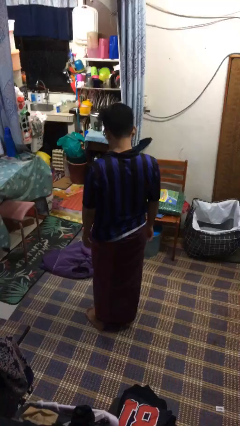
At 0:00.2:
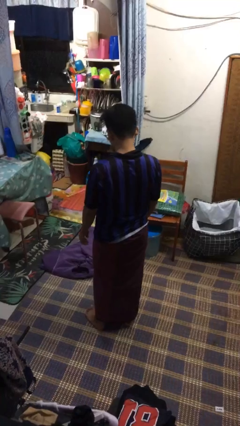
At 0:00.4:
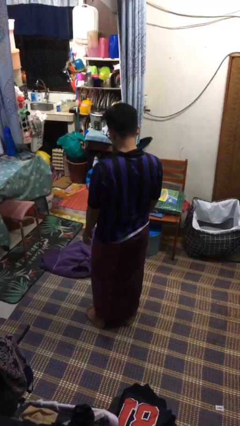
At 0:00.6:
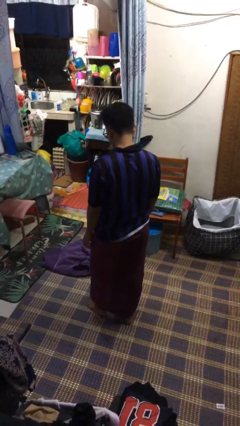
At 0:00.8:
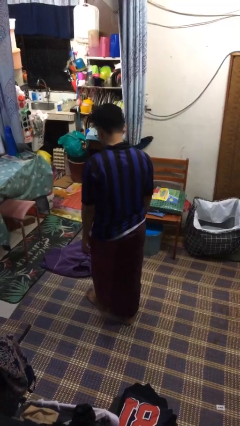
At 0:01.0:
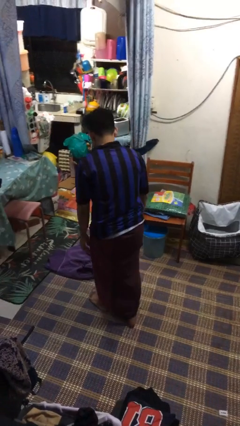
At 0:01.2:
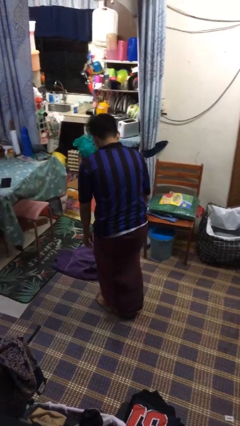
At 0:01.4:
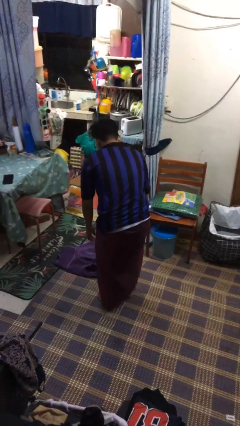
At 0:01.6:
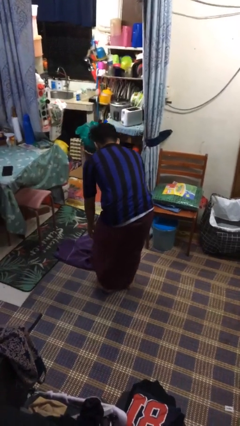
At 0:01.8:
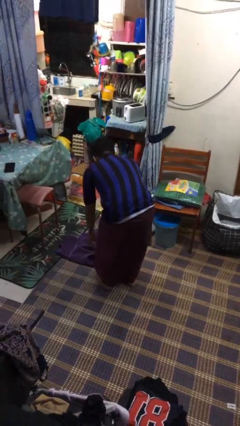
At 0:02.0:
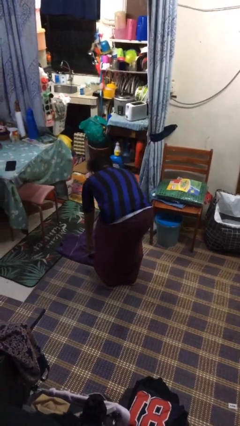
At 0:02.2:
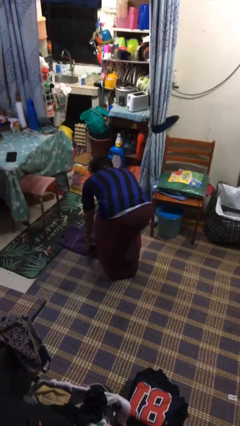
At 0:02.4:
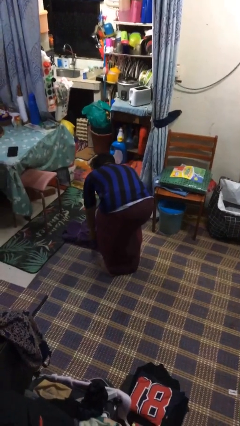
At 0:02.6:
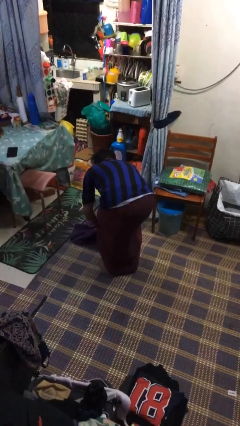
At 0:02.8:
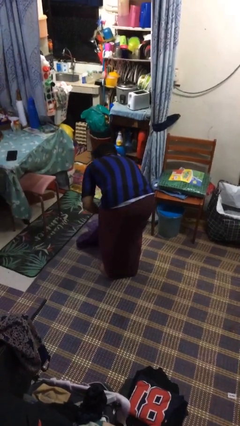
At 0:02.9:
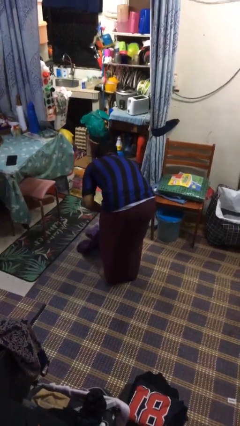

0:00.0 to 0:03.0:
person picks up object from floor

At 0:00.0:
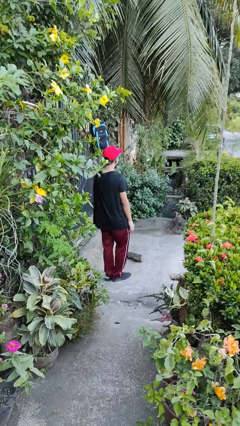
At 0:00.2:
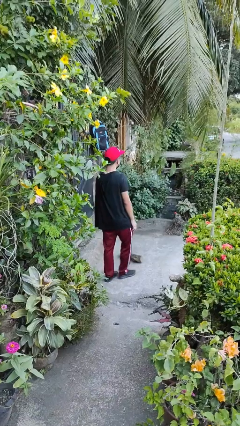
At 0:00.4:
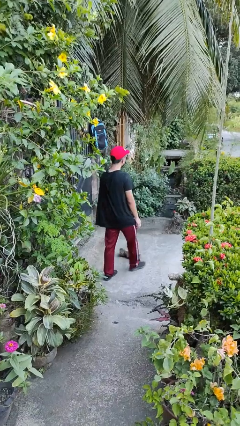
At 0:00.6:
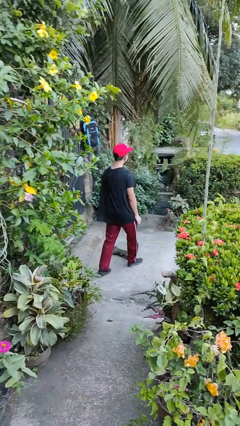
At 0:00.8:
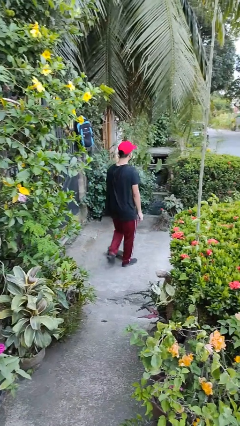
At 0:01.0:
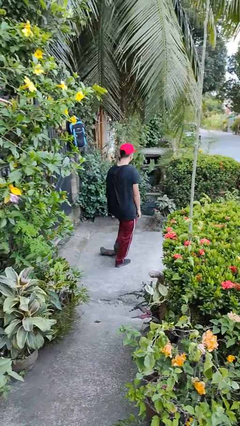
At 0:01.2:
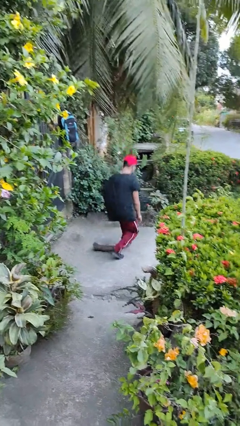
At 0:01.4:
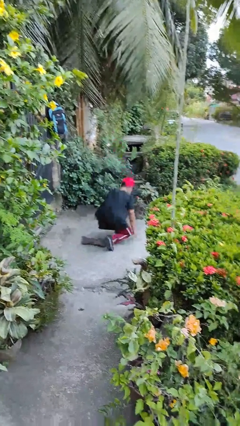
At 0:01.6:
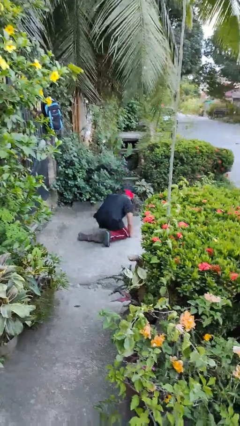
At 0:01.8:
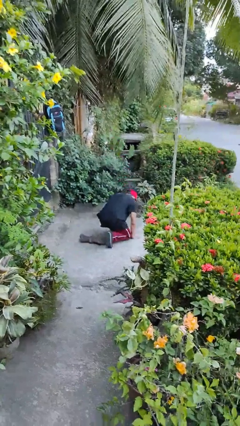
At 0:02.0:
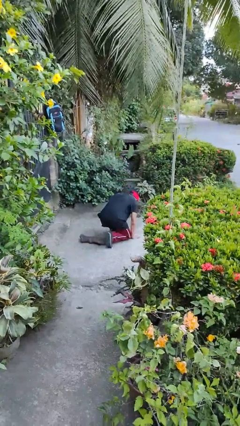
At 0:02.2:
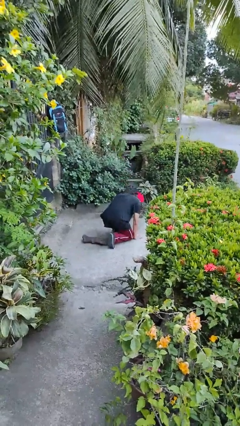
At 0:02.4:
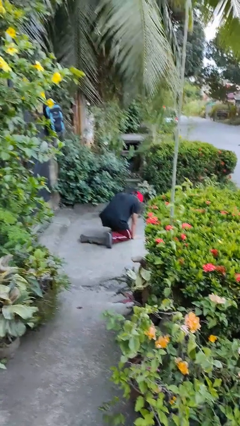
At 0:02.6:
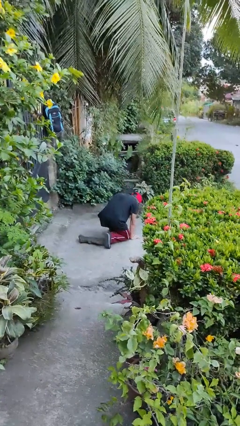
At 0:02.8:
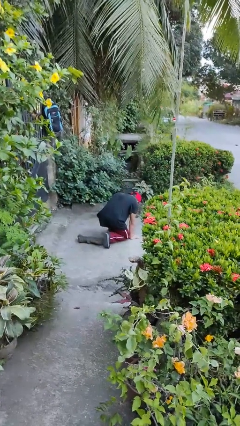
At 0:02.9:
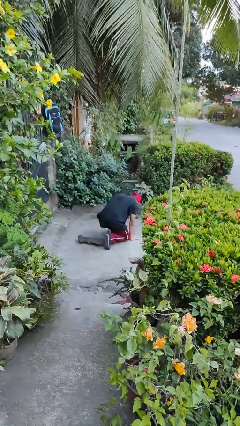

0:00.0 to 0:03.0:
person trips on object on floor

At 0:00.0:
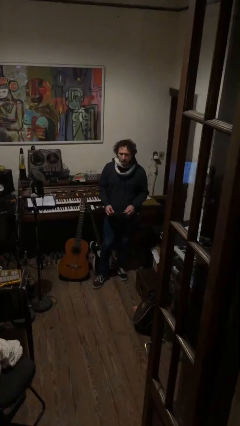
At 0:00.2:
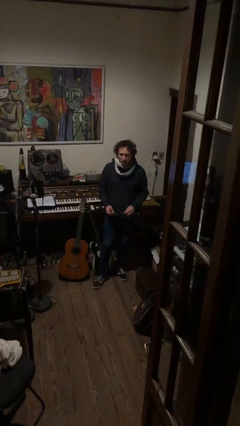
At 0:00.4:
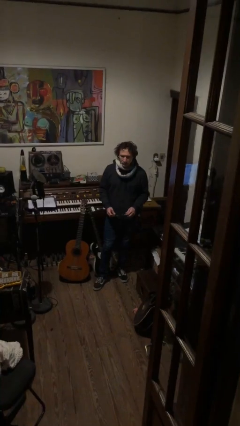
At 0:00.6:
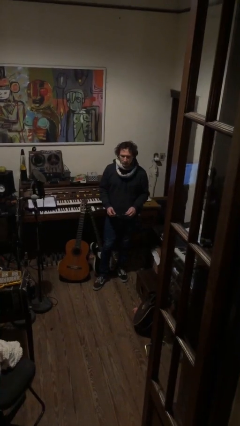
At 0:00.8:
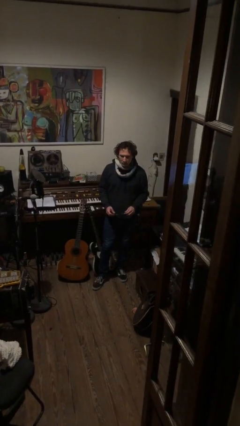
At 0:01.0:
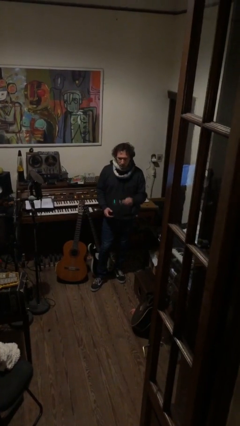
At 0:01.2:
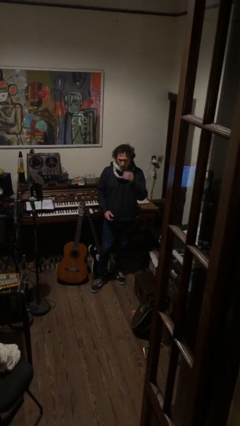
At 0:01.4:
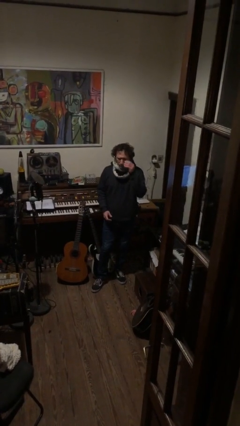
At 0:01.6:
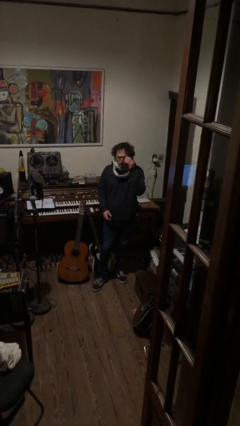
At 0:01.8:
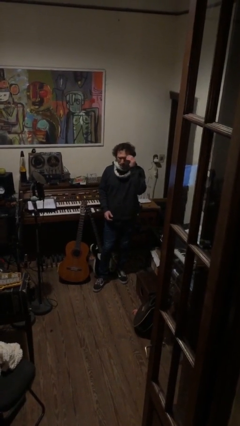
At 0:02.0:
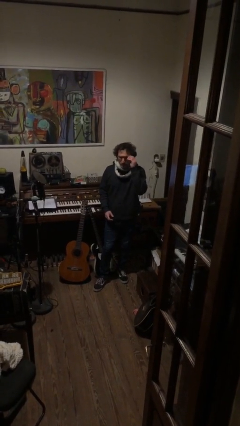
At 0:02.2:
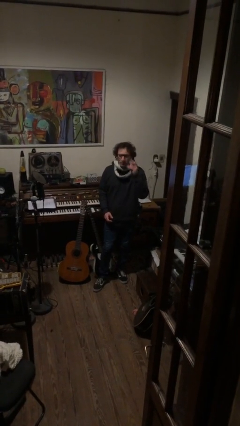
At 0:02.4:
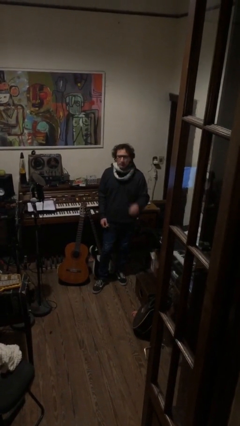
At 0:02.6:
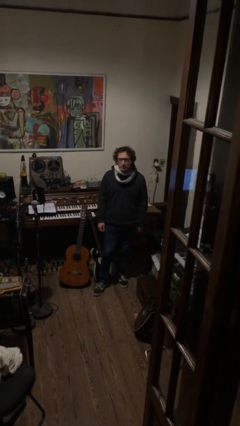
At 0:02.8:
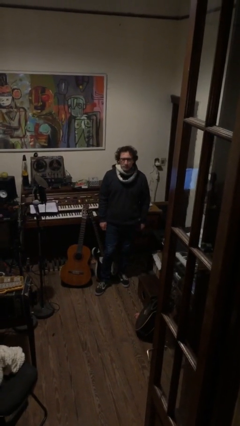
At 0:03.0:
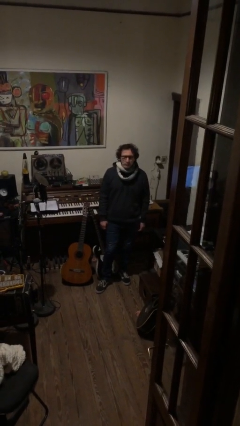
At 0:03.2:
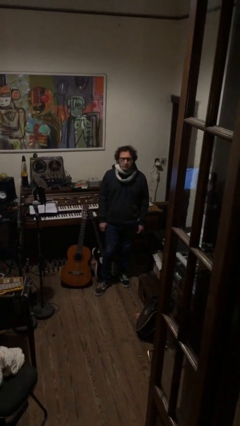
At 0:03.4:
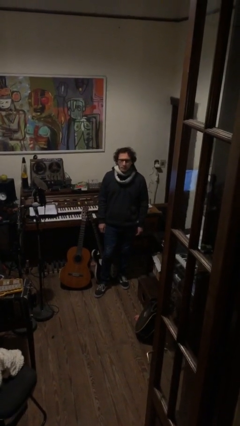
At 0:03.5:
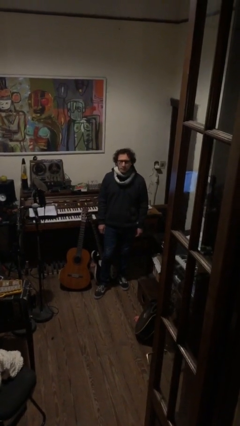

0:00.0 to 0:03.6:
person puts on glasses

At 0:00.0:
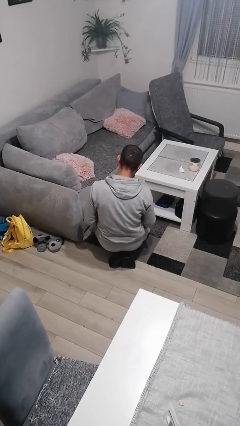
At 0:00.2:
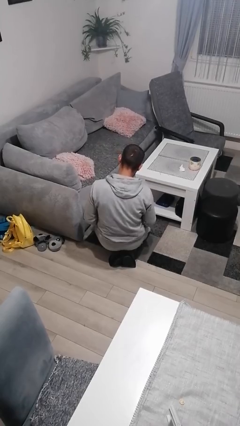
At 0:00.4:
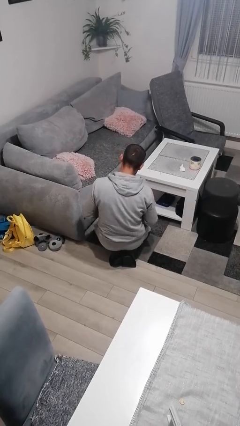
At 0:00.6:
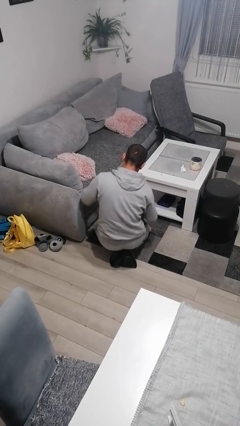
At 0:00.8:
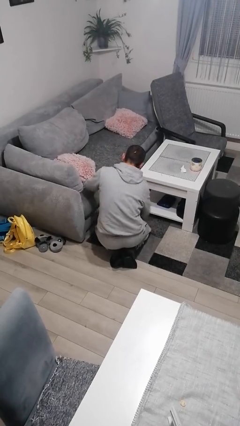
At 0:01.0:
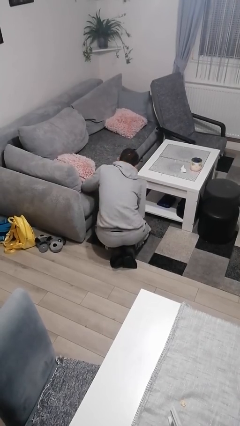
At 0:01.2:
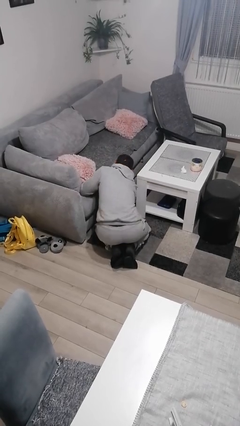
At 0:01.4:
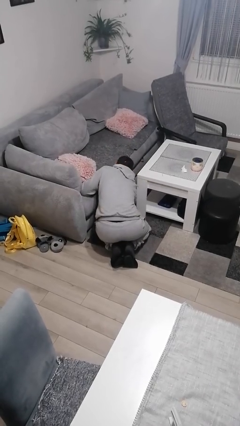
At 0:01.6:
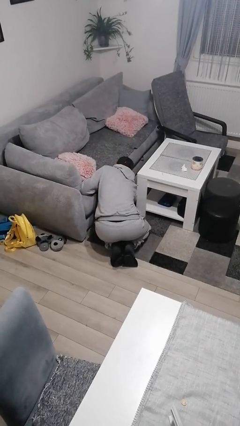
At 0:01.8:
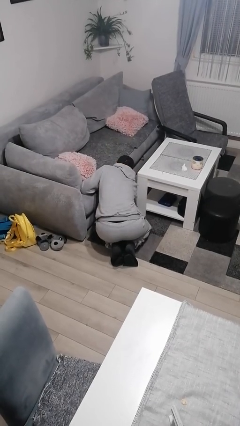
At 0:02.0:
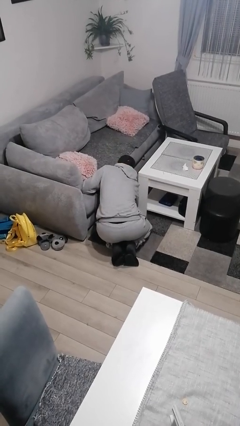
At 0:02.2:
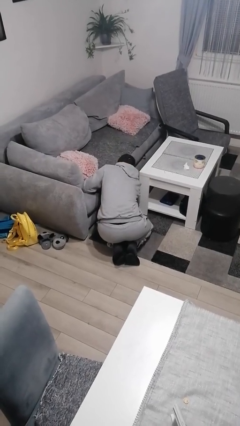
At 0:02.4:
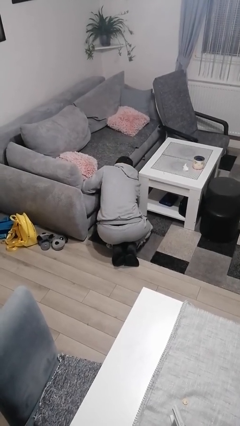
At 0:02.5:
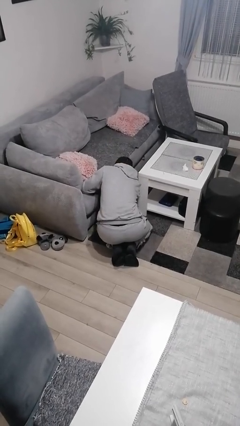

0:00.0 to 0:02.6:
person searches under couch

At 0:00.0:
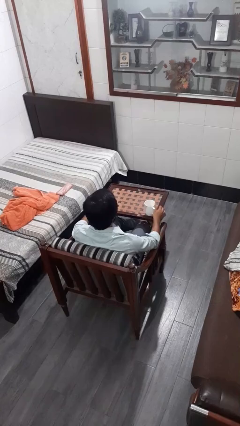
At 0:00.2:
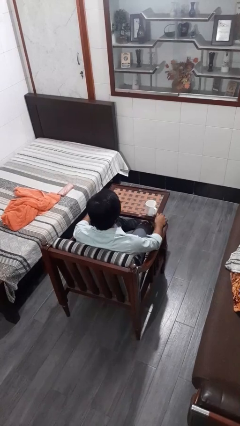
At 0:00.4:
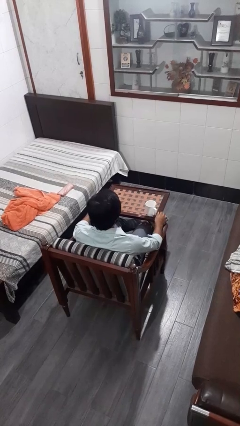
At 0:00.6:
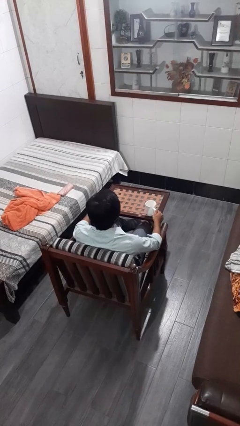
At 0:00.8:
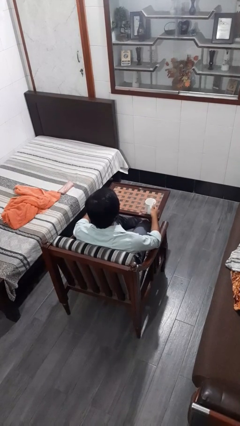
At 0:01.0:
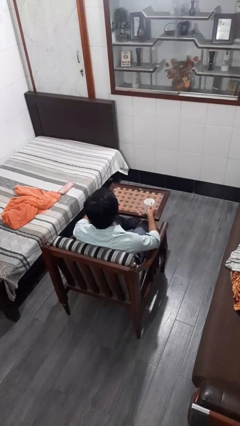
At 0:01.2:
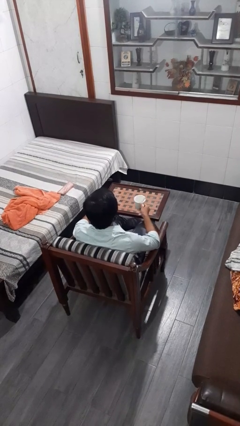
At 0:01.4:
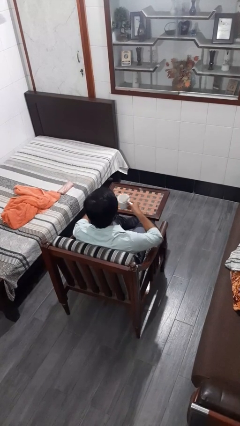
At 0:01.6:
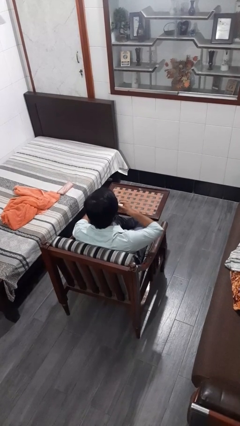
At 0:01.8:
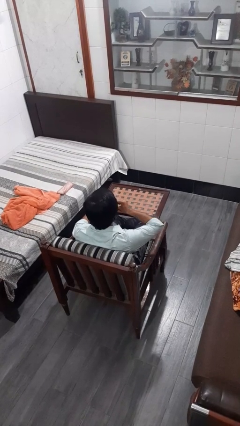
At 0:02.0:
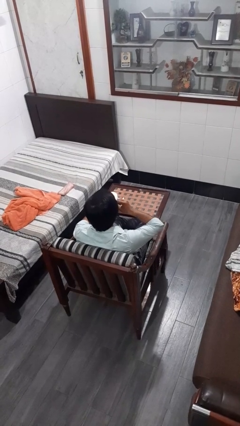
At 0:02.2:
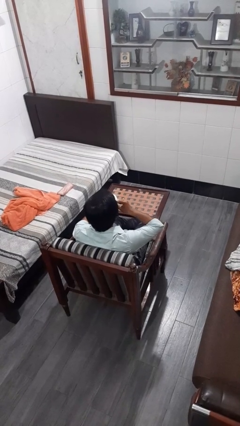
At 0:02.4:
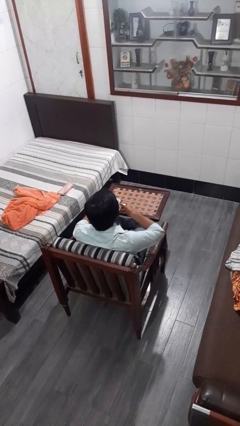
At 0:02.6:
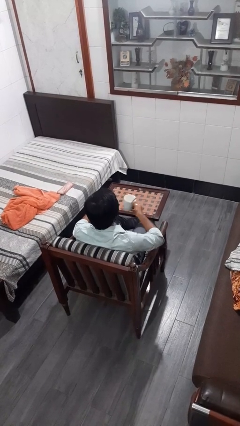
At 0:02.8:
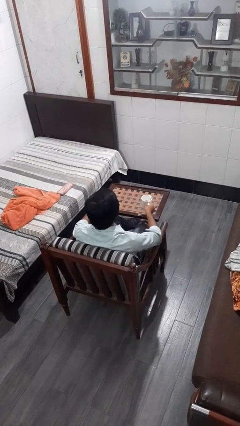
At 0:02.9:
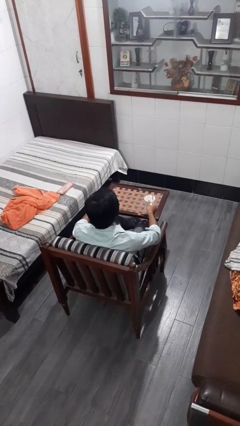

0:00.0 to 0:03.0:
person drinks from mug

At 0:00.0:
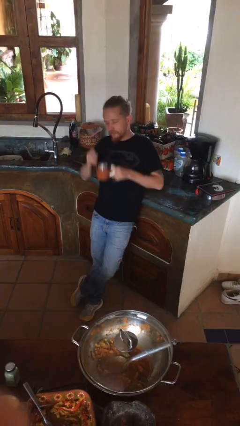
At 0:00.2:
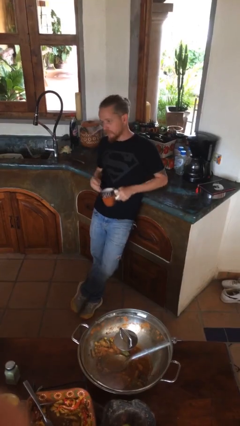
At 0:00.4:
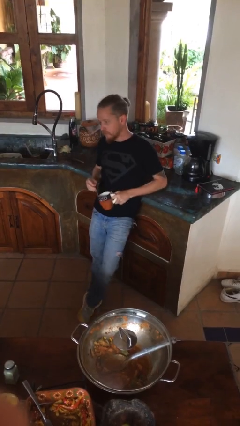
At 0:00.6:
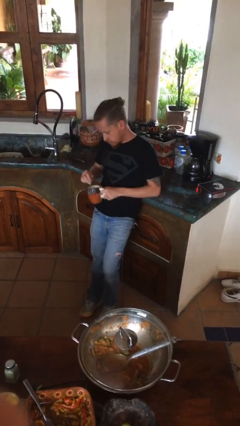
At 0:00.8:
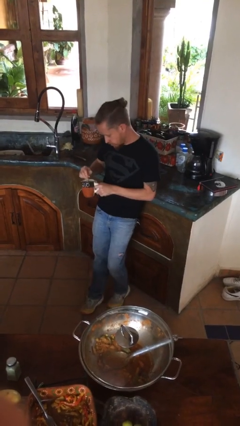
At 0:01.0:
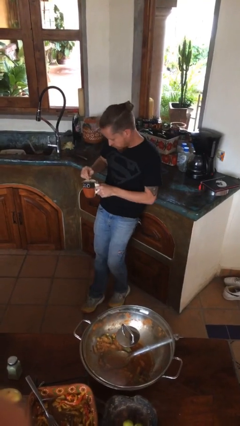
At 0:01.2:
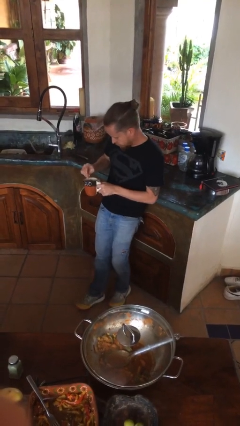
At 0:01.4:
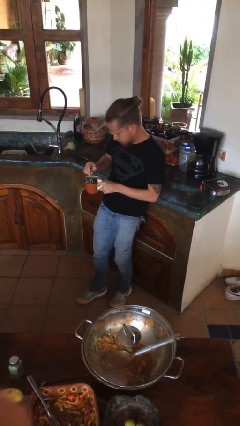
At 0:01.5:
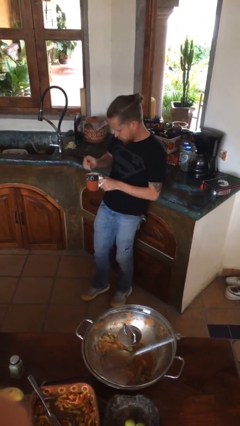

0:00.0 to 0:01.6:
person stirs mug

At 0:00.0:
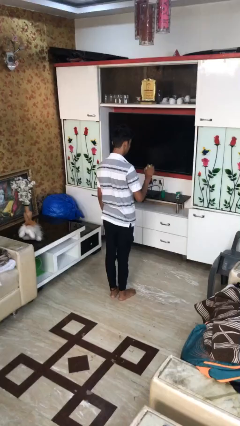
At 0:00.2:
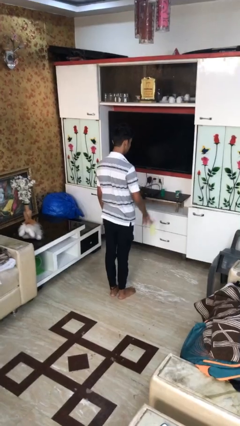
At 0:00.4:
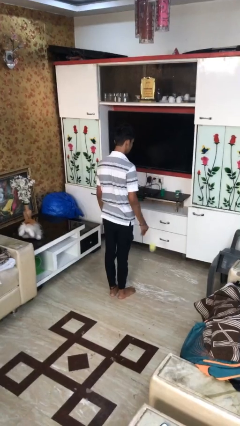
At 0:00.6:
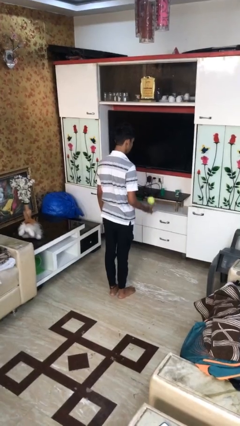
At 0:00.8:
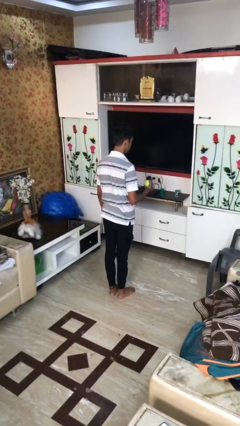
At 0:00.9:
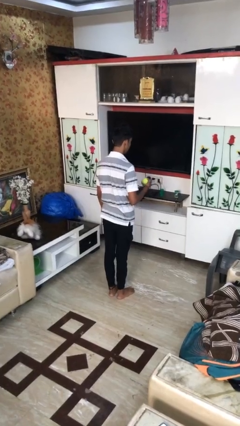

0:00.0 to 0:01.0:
person bounces ball on floor
